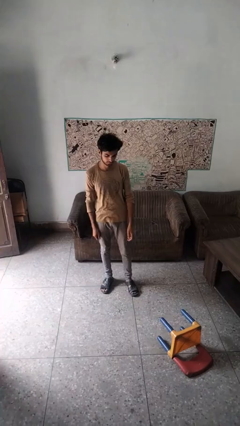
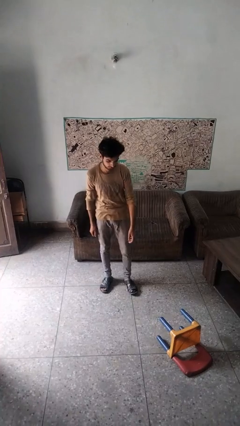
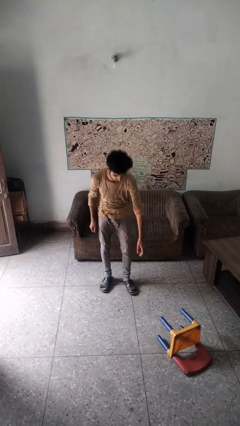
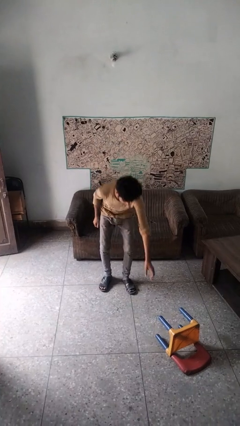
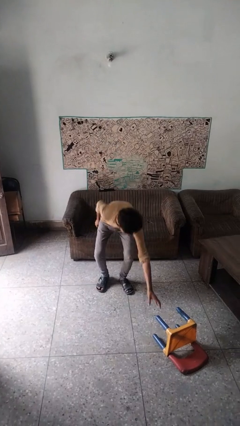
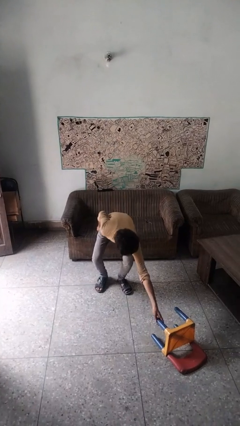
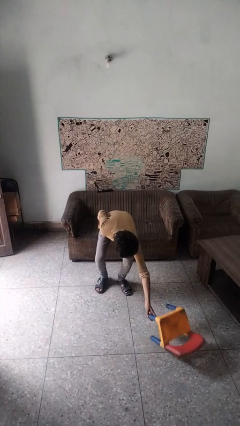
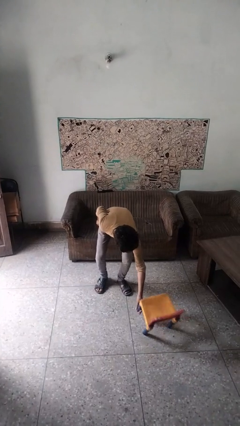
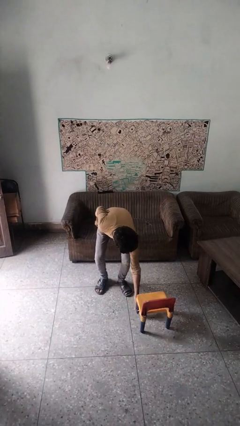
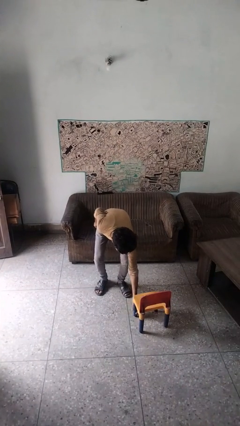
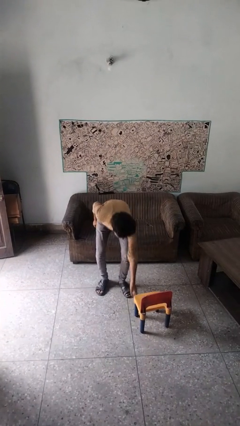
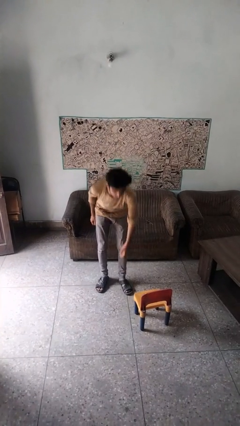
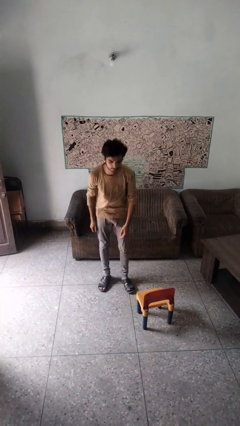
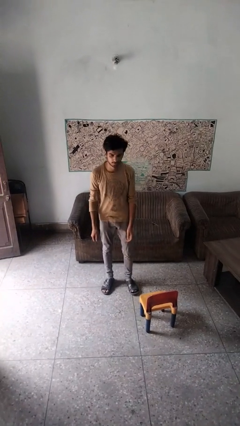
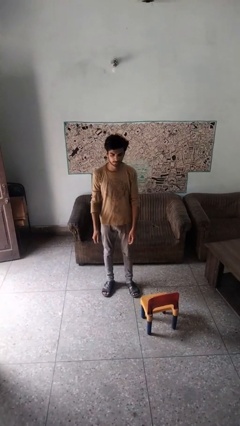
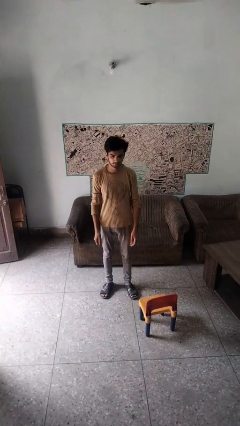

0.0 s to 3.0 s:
person sets upright furniture

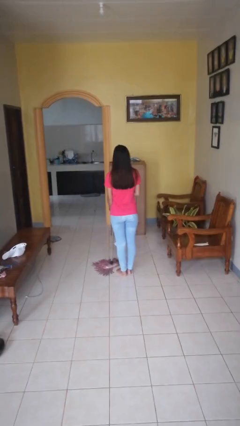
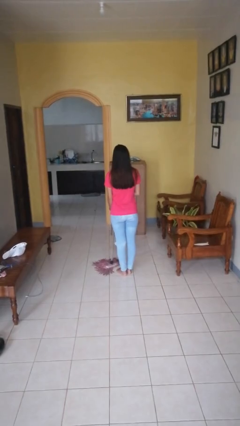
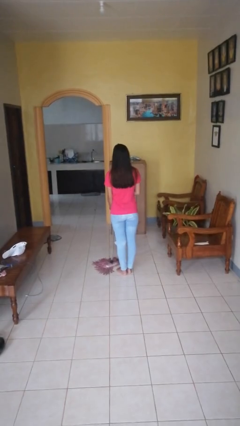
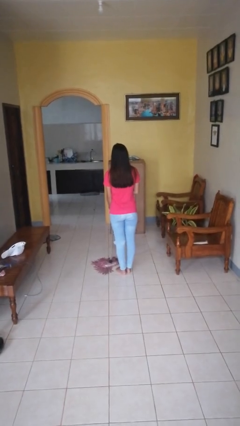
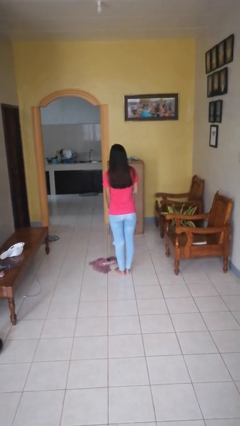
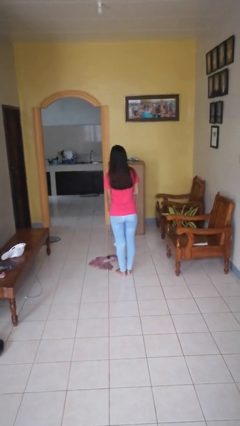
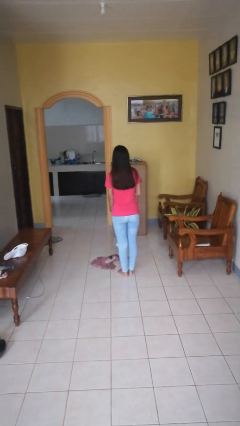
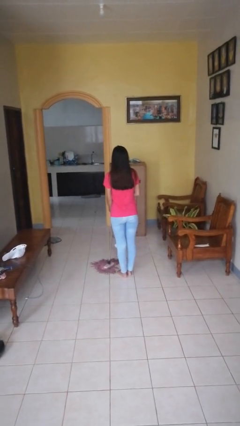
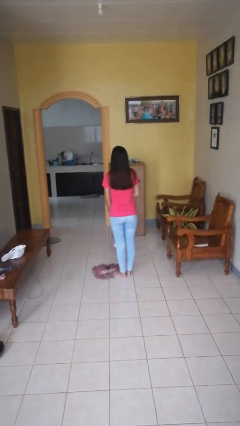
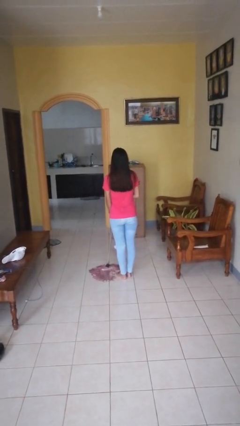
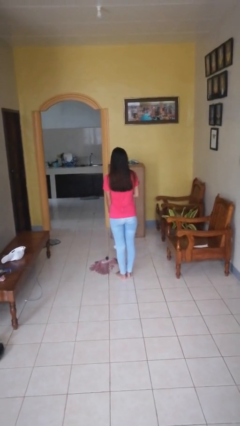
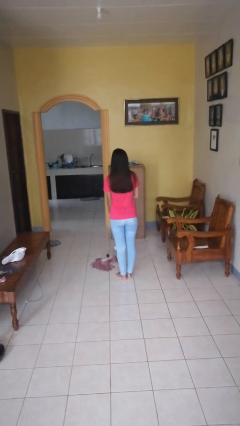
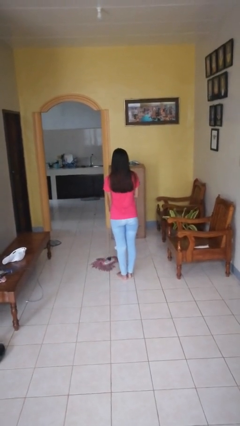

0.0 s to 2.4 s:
person mops

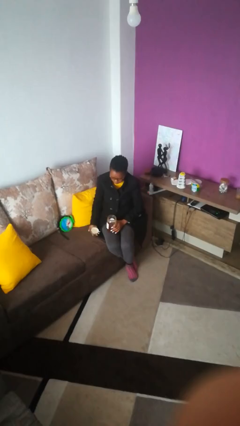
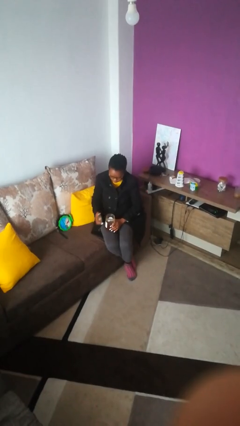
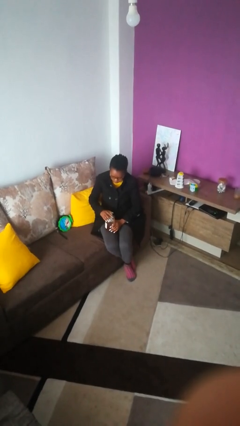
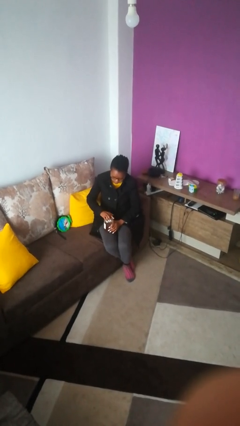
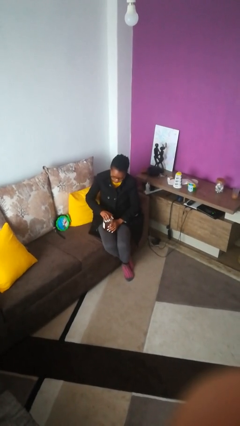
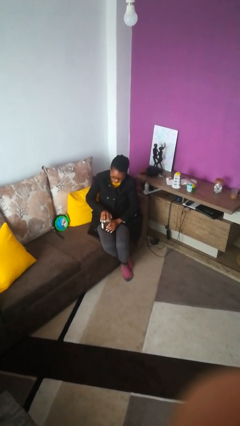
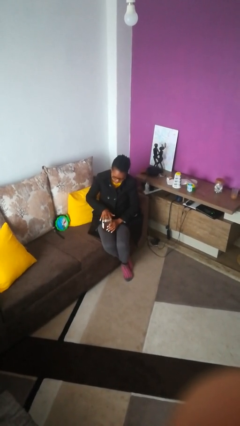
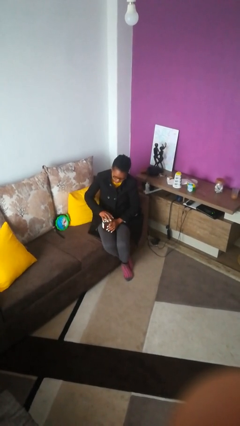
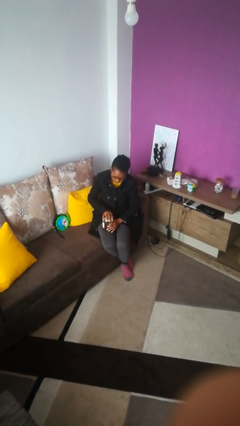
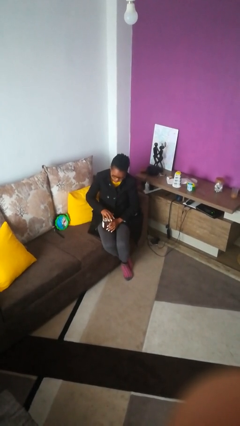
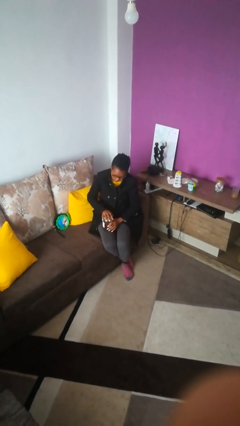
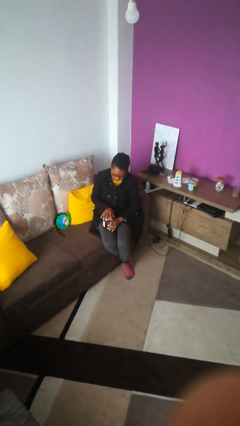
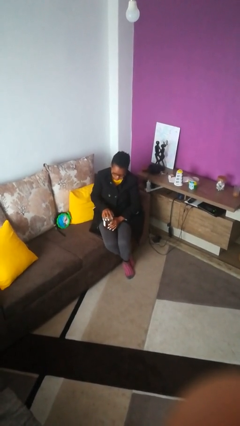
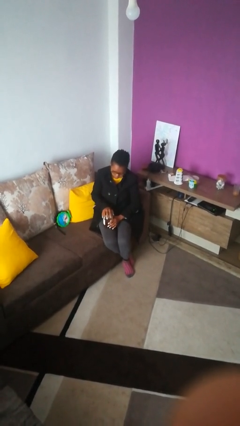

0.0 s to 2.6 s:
person closes jar

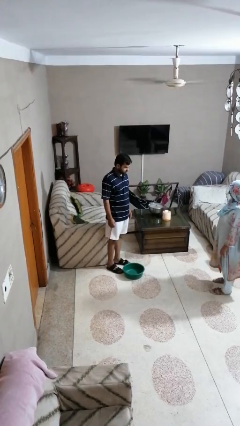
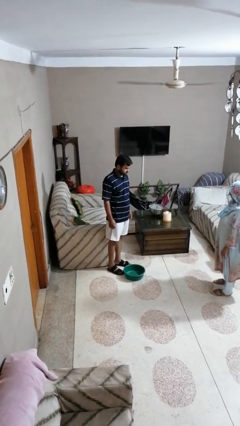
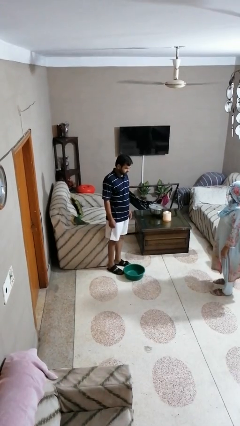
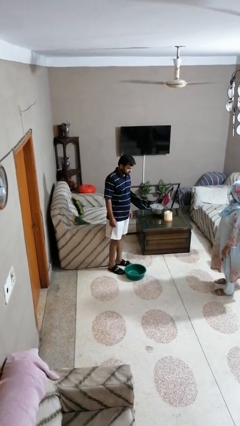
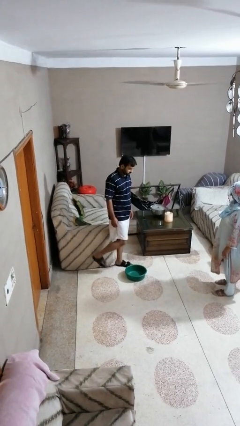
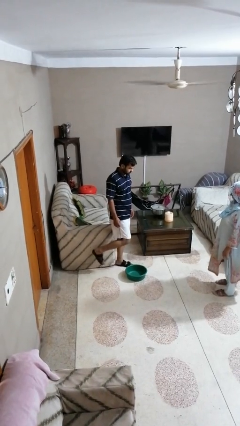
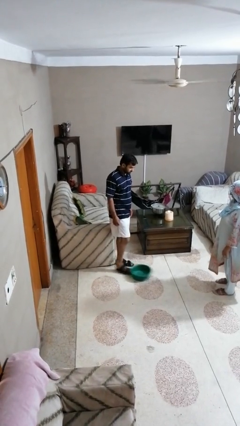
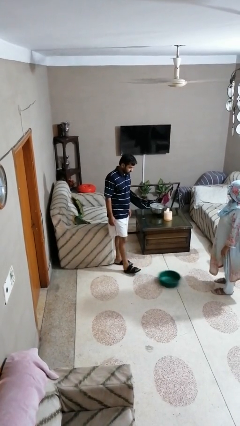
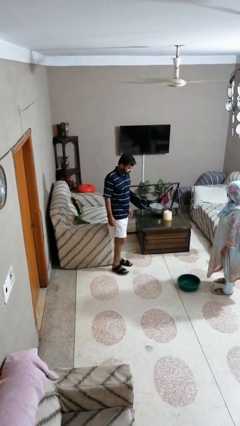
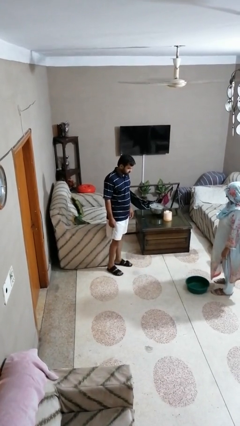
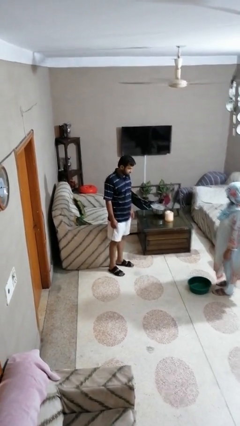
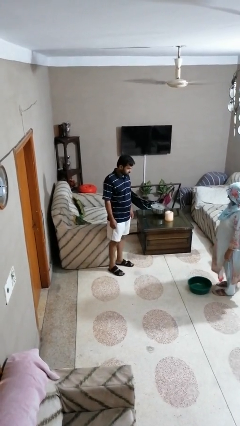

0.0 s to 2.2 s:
person kicks object to person

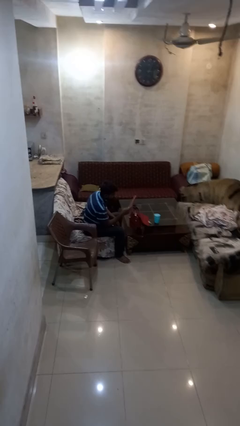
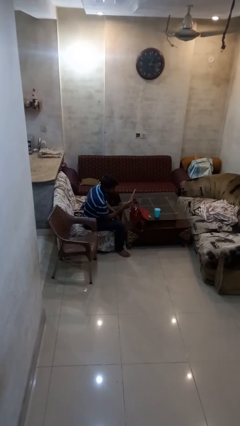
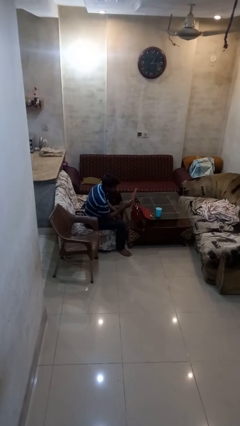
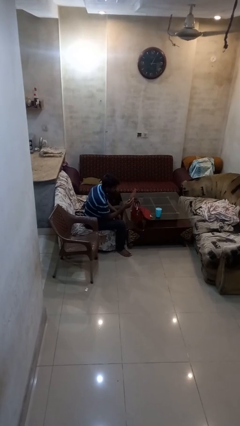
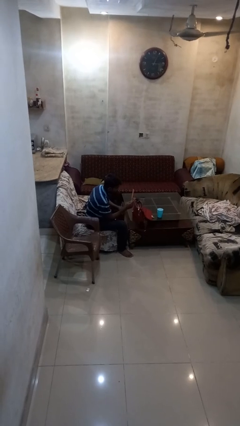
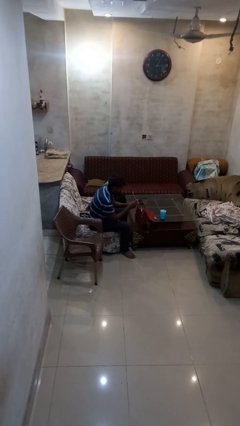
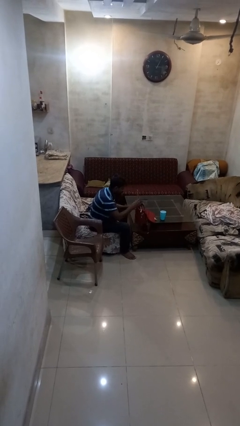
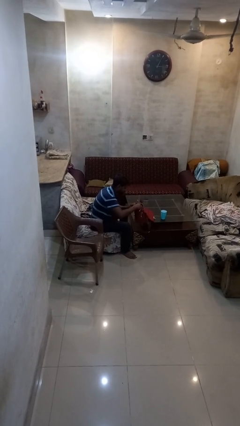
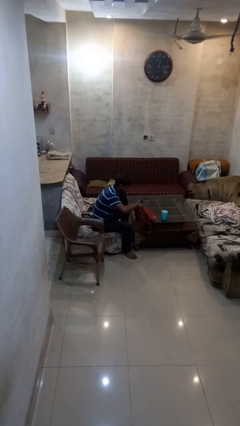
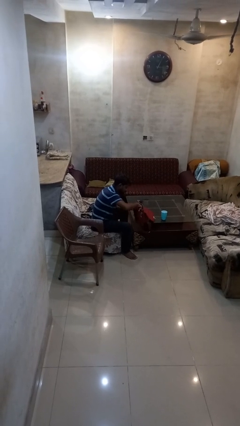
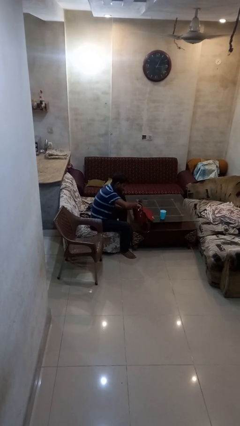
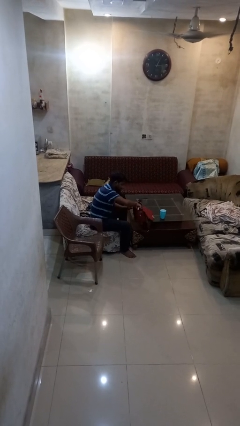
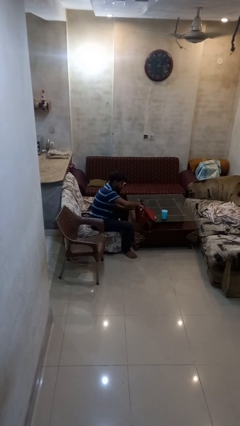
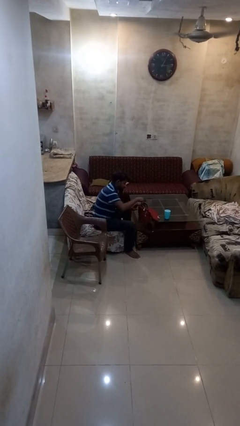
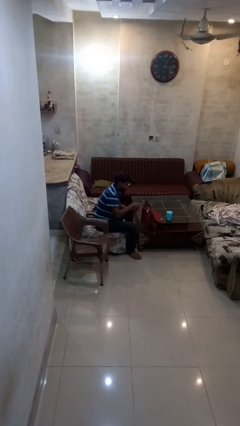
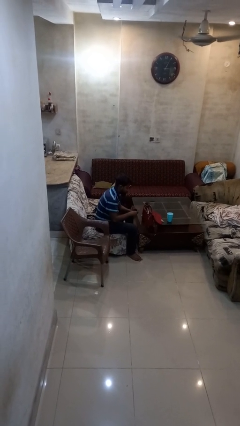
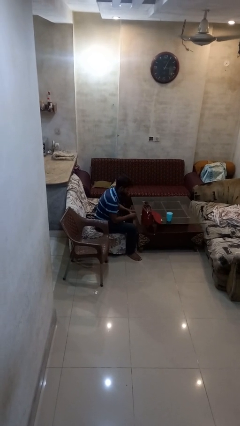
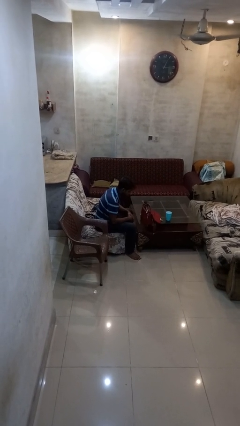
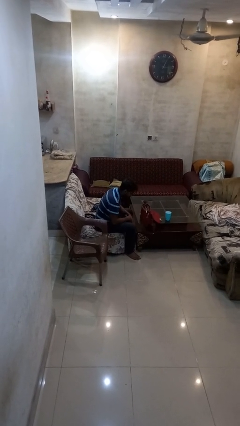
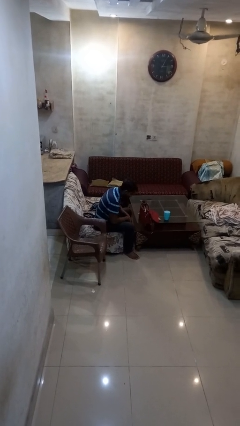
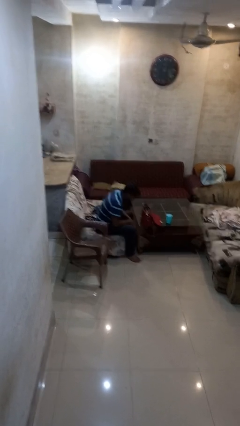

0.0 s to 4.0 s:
person puts object into purse

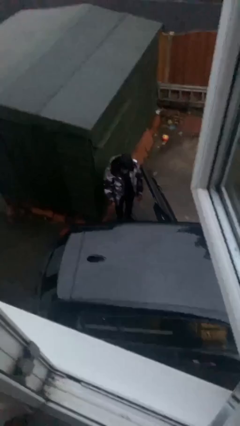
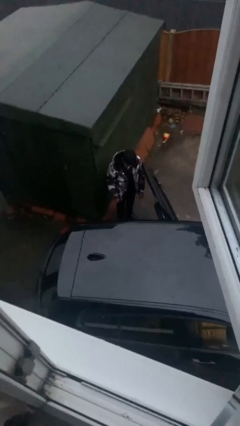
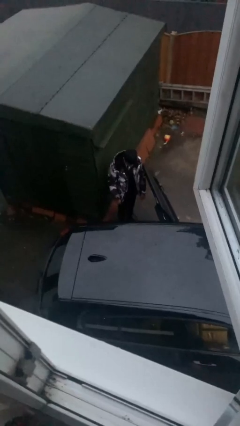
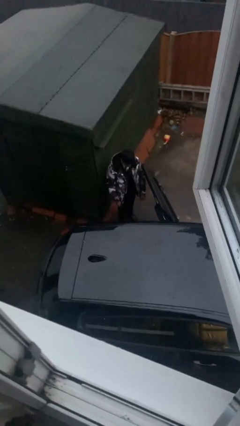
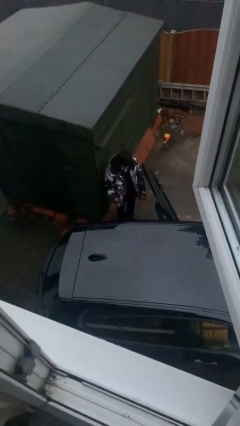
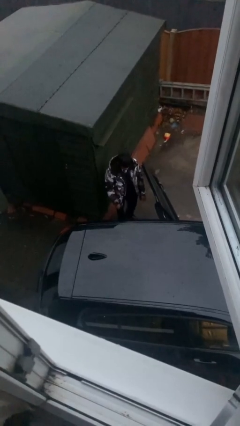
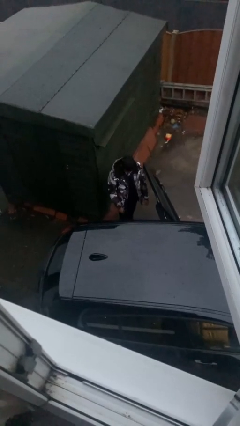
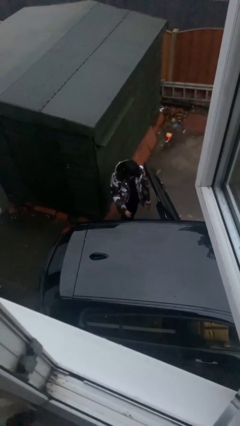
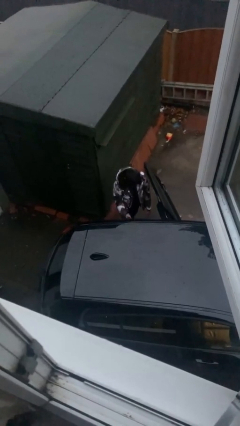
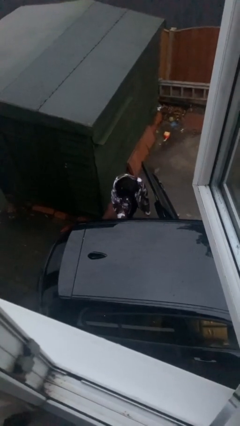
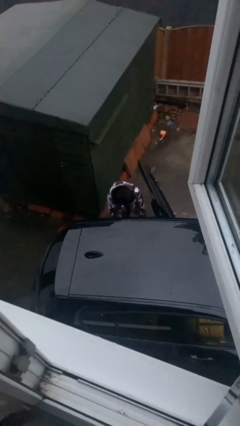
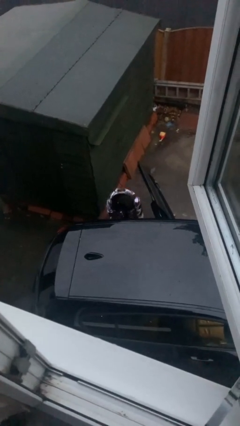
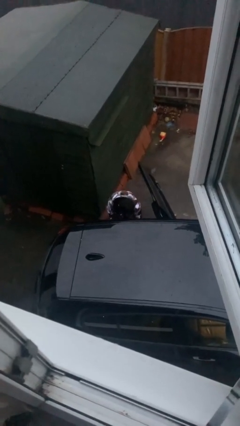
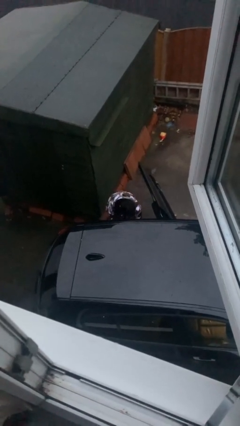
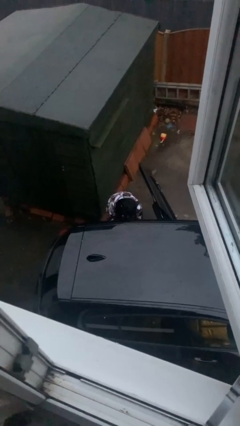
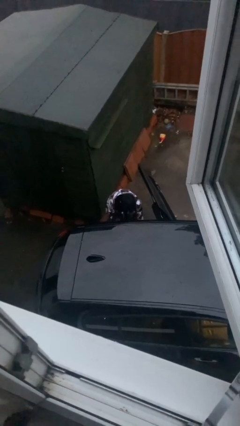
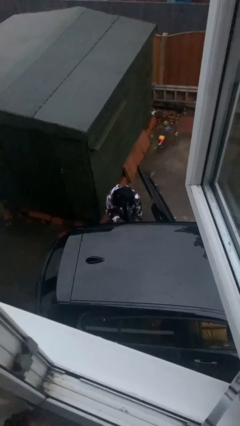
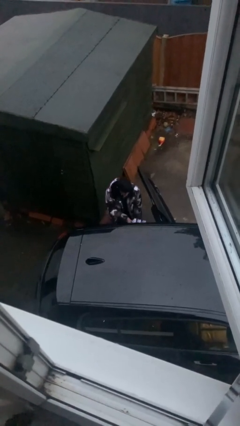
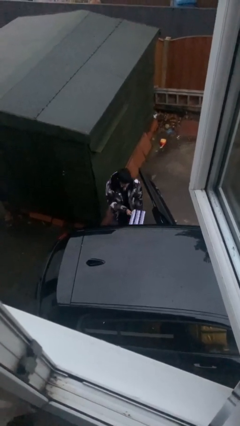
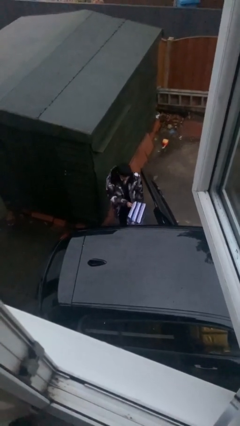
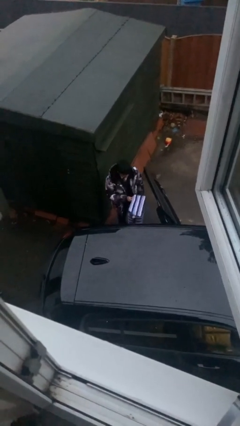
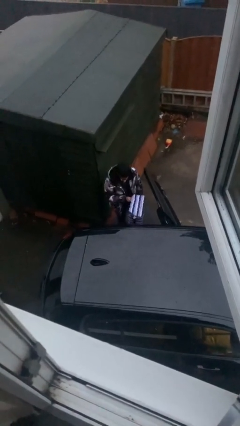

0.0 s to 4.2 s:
person unloads car
